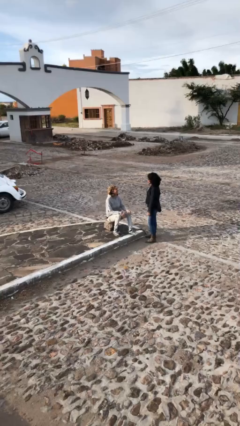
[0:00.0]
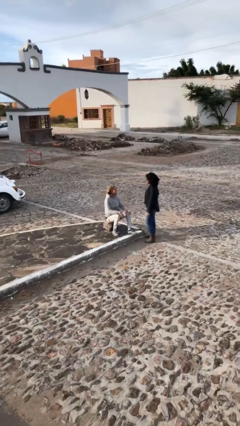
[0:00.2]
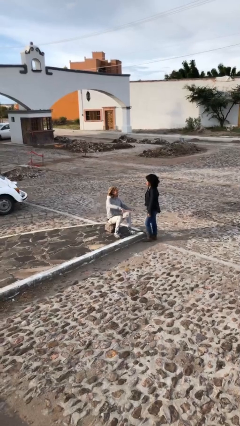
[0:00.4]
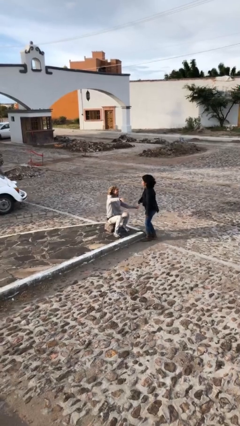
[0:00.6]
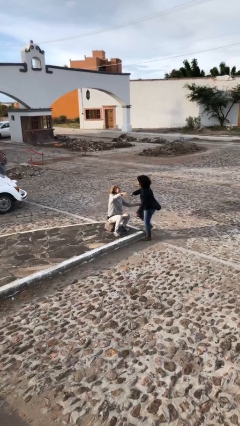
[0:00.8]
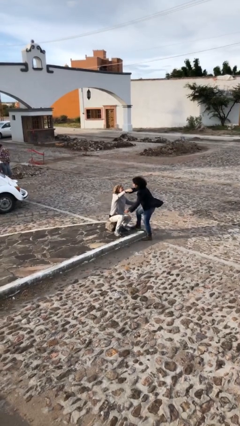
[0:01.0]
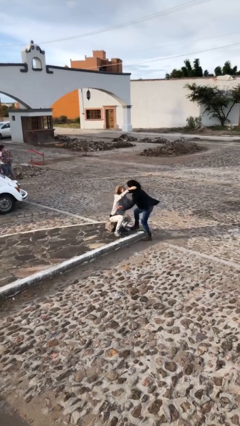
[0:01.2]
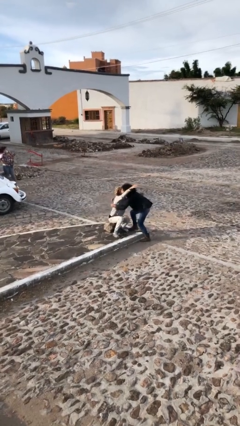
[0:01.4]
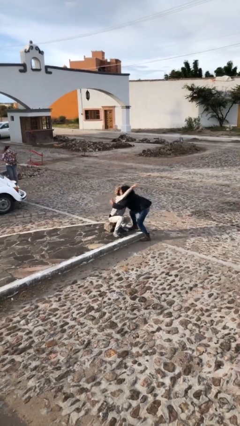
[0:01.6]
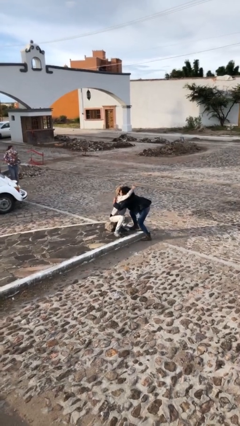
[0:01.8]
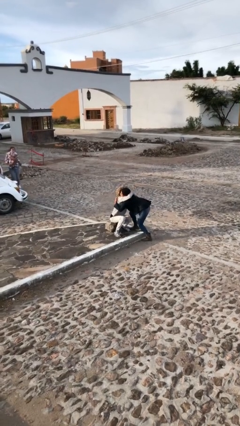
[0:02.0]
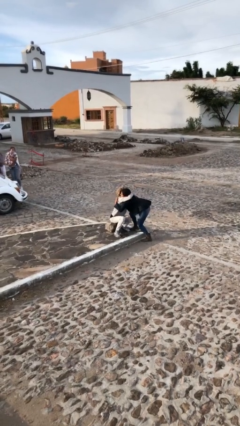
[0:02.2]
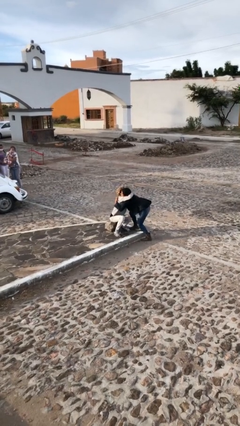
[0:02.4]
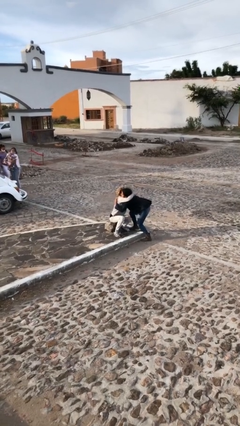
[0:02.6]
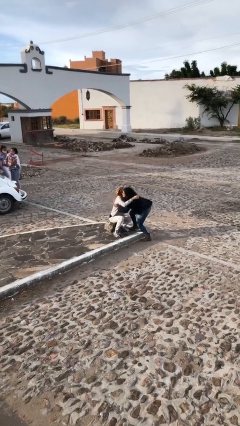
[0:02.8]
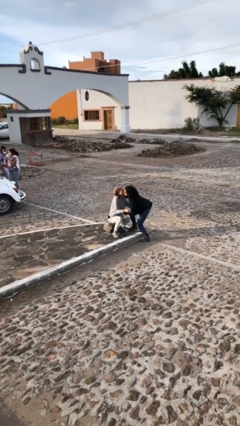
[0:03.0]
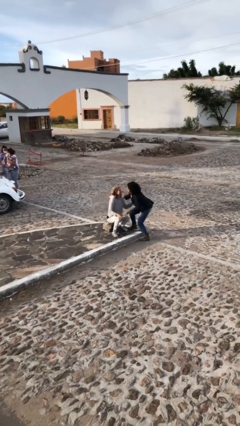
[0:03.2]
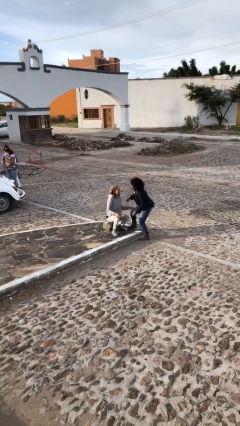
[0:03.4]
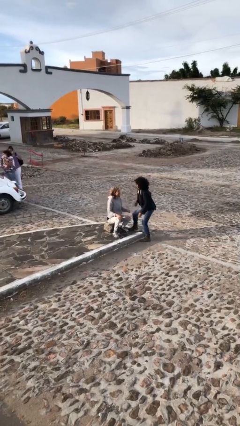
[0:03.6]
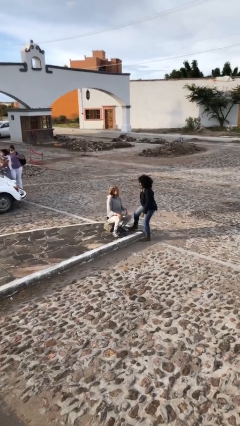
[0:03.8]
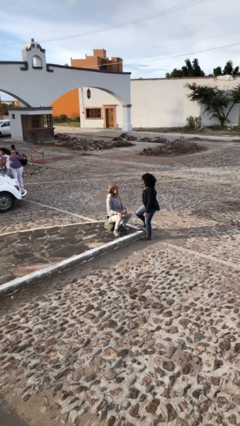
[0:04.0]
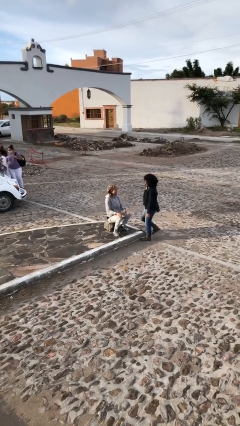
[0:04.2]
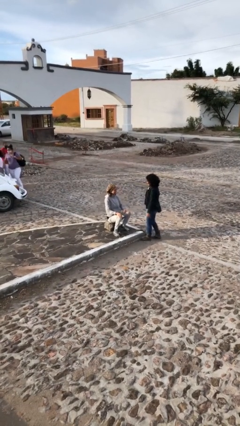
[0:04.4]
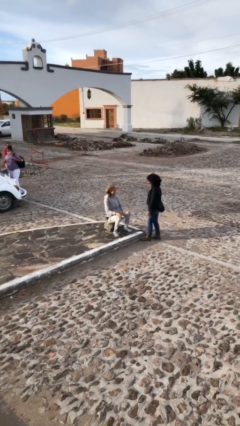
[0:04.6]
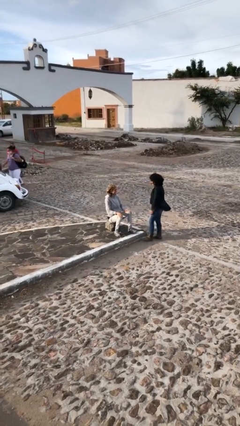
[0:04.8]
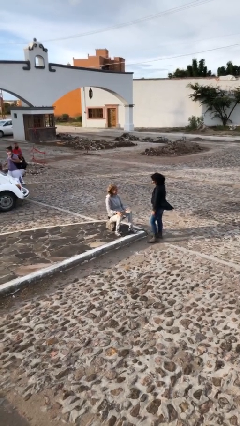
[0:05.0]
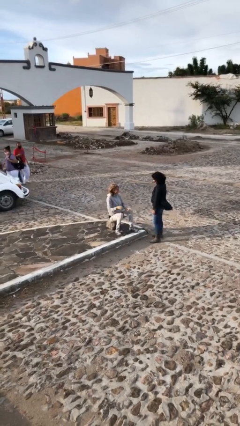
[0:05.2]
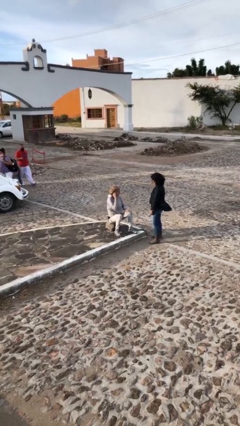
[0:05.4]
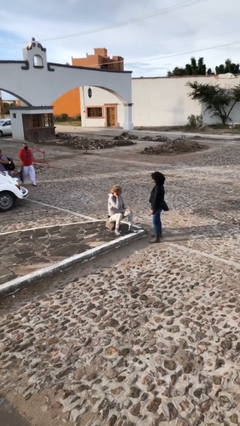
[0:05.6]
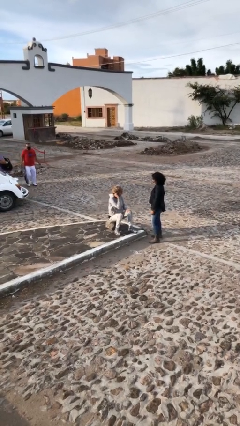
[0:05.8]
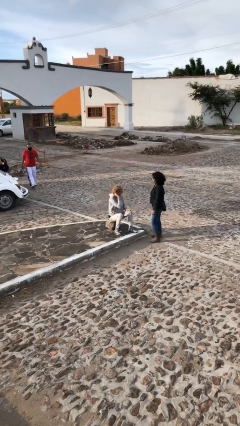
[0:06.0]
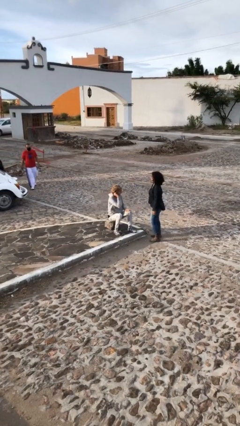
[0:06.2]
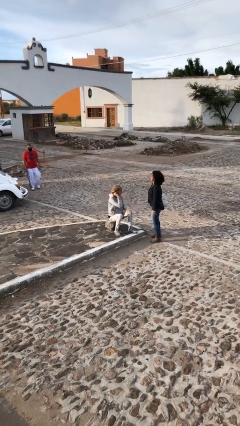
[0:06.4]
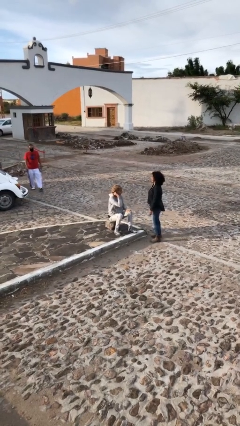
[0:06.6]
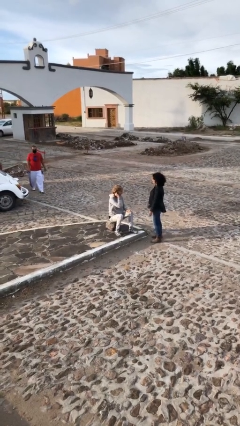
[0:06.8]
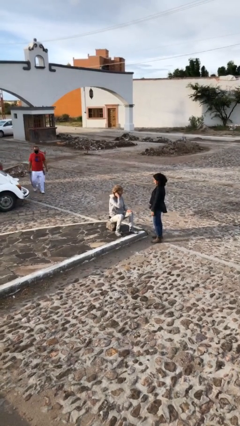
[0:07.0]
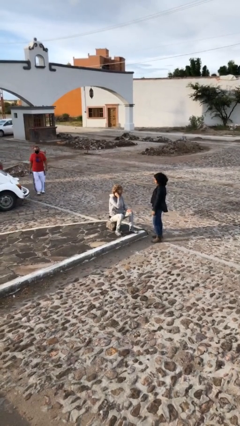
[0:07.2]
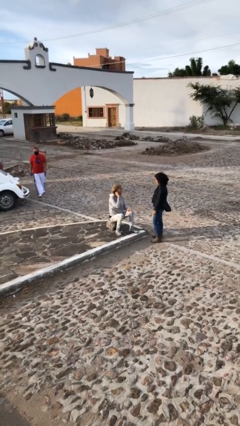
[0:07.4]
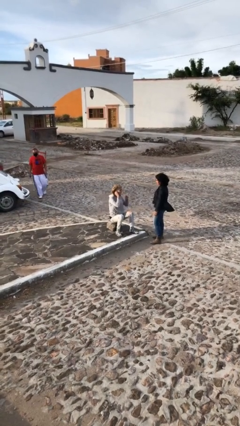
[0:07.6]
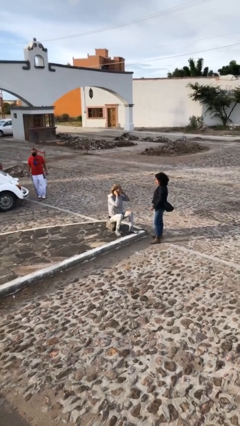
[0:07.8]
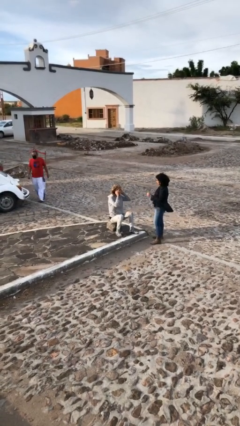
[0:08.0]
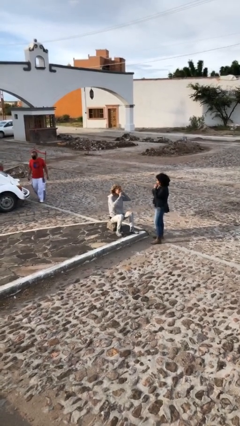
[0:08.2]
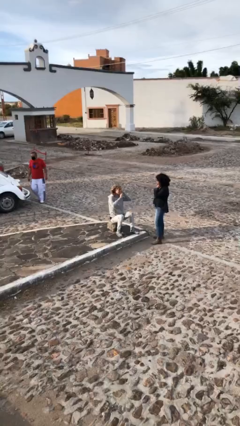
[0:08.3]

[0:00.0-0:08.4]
person embraces person

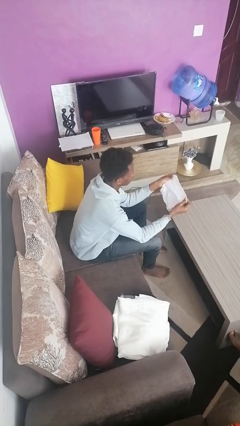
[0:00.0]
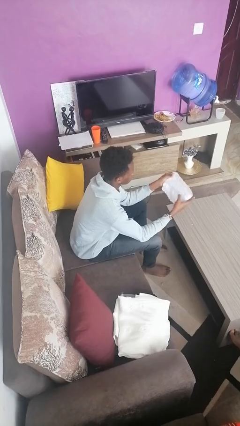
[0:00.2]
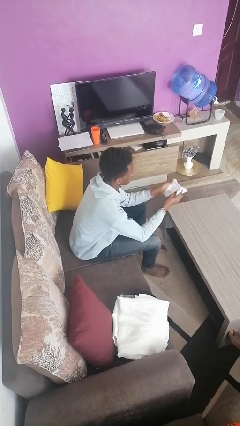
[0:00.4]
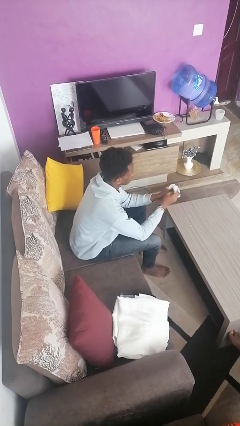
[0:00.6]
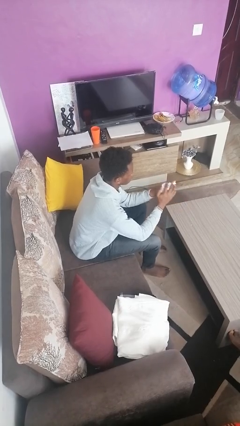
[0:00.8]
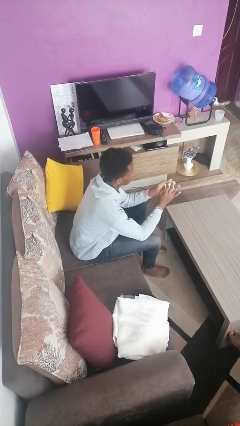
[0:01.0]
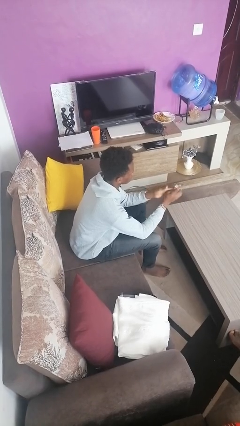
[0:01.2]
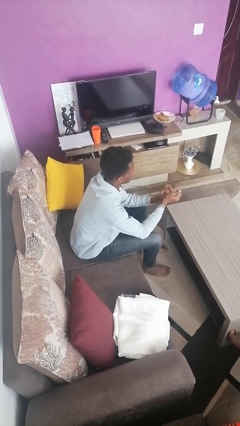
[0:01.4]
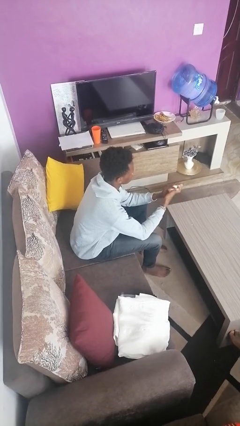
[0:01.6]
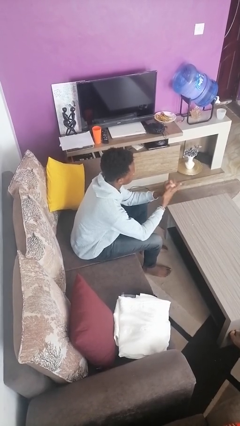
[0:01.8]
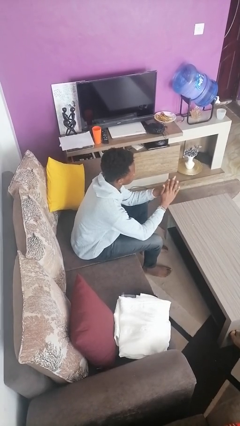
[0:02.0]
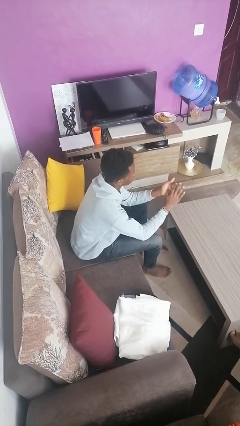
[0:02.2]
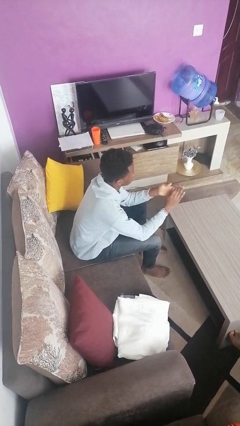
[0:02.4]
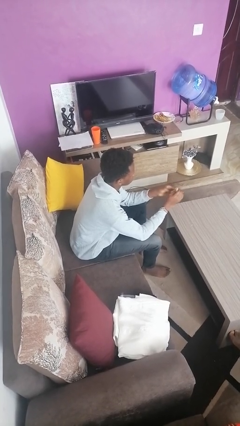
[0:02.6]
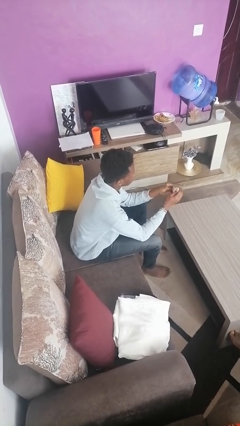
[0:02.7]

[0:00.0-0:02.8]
person crumples paper

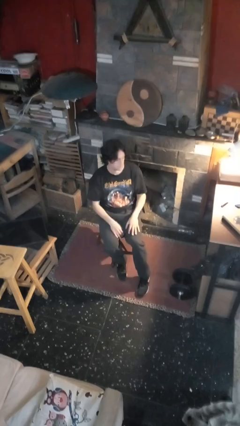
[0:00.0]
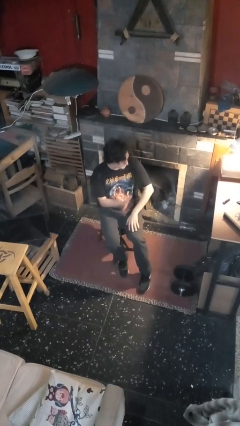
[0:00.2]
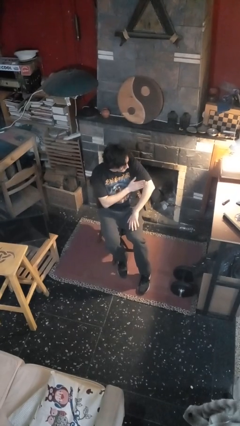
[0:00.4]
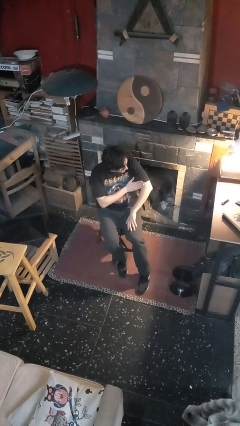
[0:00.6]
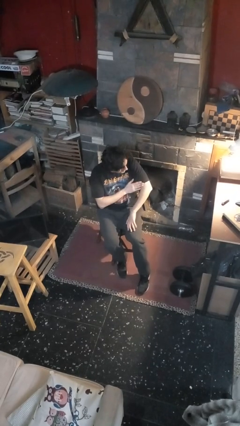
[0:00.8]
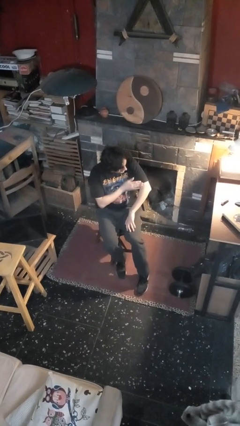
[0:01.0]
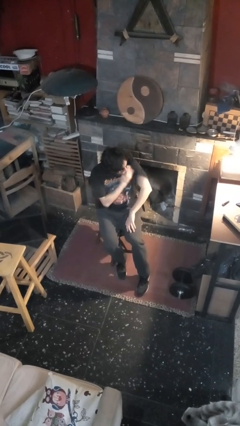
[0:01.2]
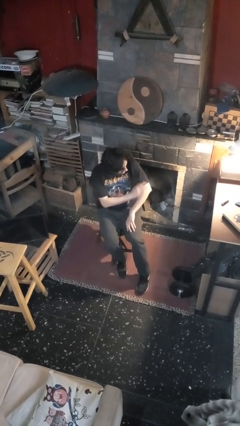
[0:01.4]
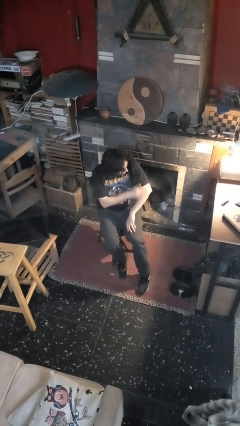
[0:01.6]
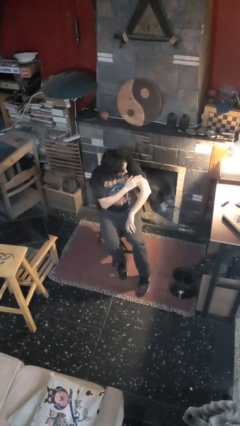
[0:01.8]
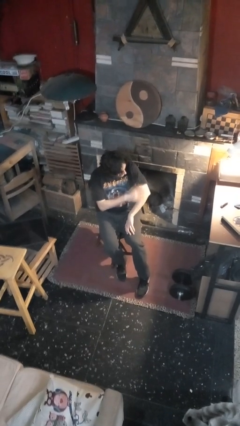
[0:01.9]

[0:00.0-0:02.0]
person swats bug

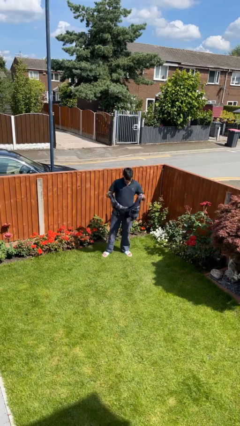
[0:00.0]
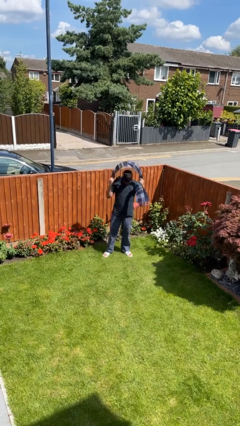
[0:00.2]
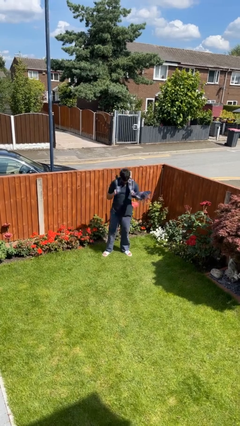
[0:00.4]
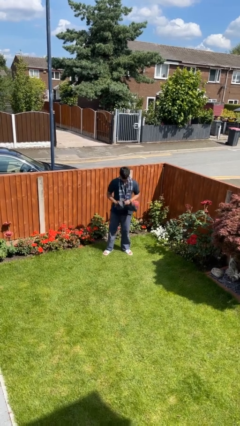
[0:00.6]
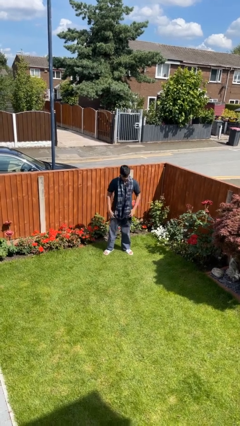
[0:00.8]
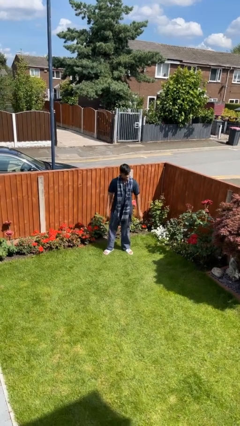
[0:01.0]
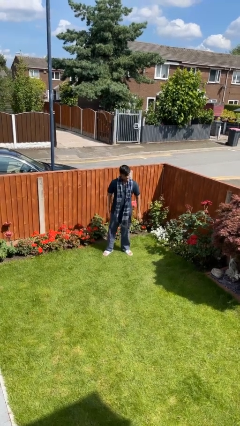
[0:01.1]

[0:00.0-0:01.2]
person puts on scarf

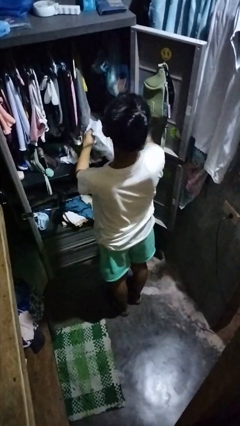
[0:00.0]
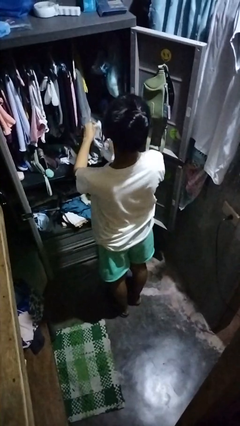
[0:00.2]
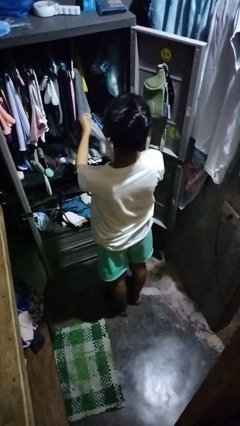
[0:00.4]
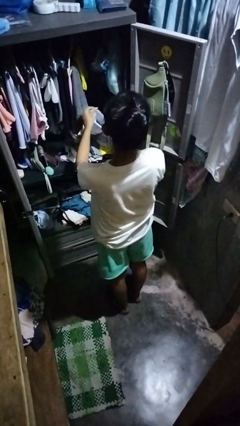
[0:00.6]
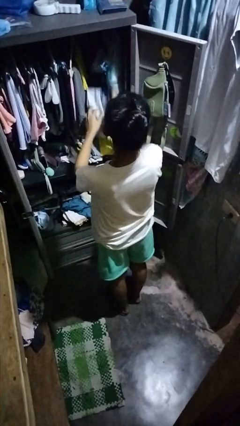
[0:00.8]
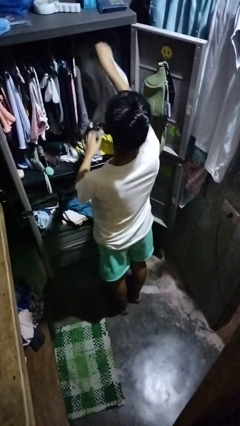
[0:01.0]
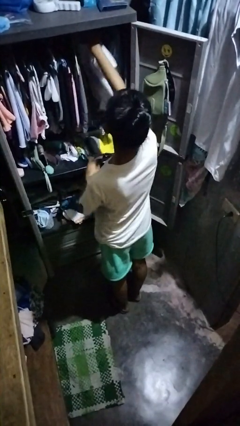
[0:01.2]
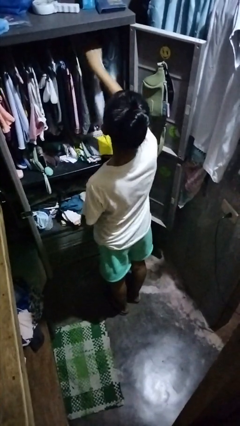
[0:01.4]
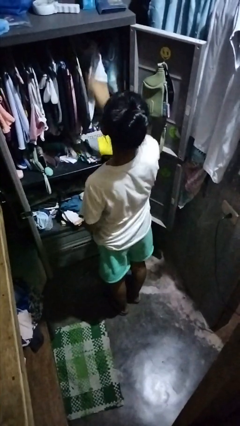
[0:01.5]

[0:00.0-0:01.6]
person puts clothes into closet

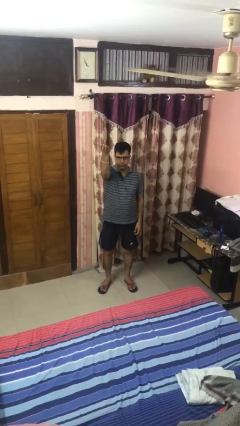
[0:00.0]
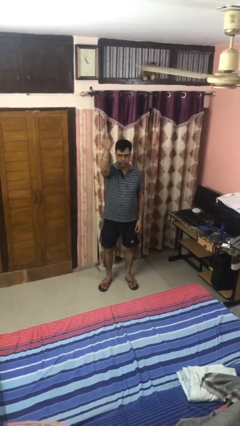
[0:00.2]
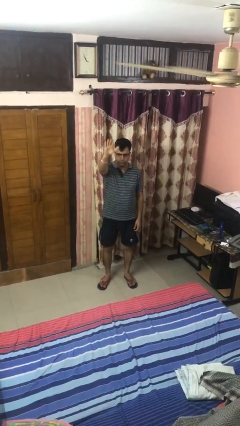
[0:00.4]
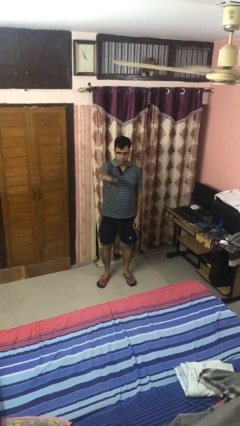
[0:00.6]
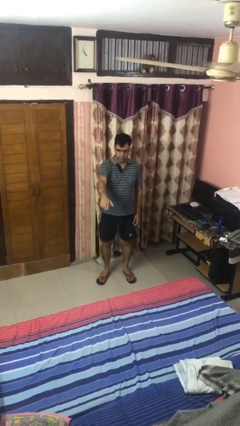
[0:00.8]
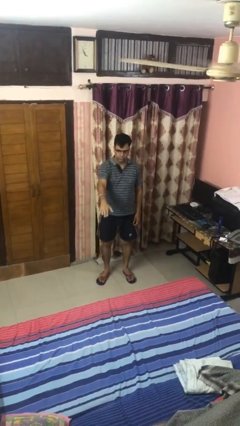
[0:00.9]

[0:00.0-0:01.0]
person gestures swipe down

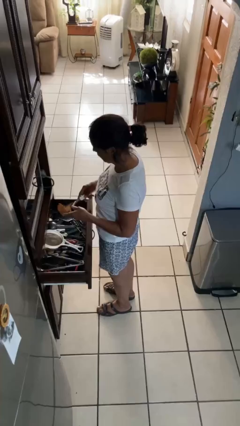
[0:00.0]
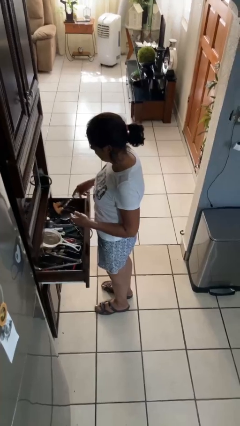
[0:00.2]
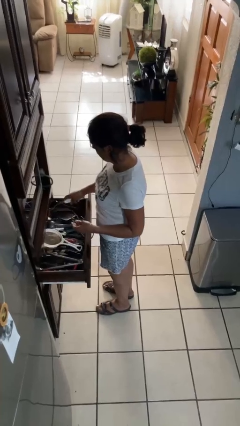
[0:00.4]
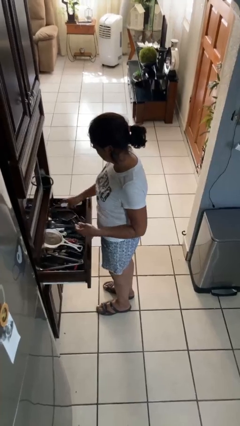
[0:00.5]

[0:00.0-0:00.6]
person puts object into kitchen drawer
